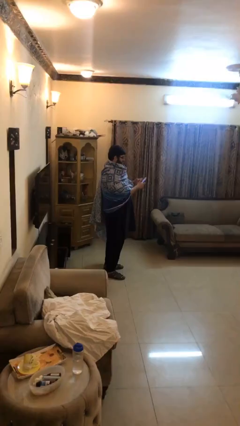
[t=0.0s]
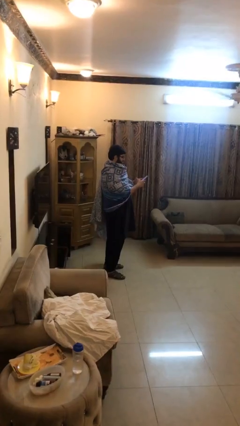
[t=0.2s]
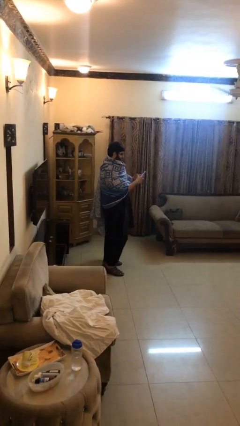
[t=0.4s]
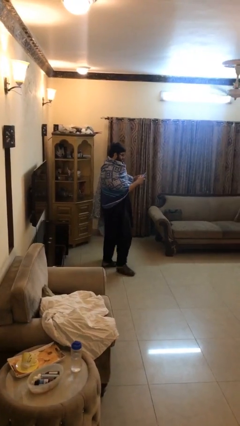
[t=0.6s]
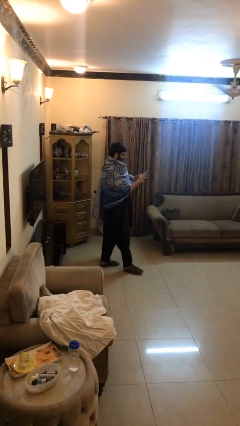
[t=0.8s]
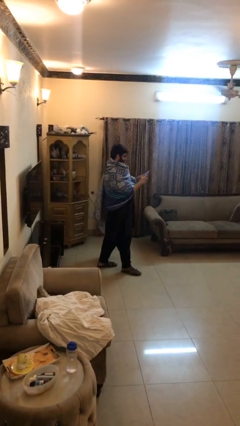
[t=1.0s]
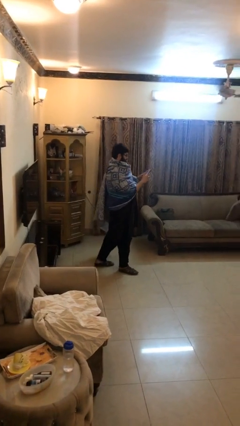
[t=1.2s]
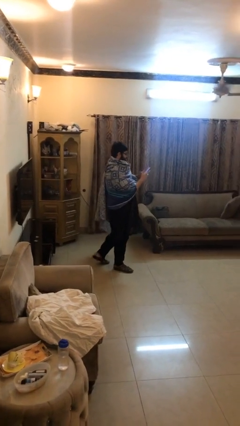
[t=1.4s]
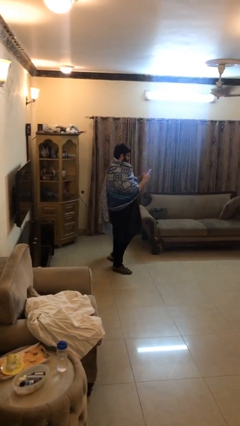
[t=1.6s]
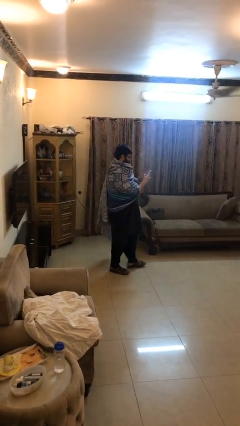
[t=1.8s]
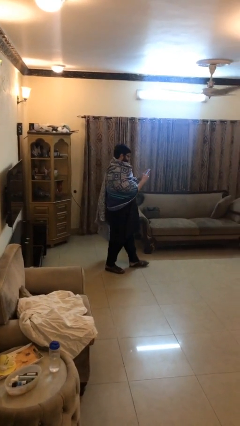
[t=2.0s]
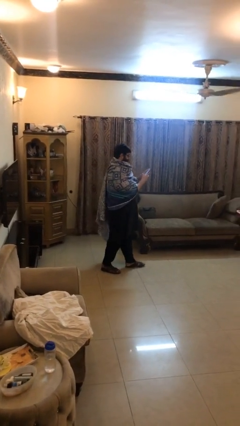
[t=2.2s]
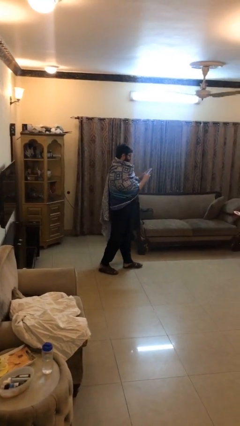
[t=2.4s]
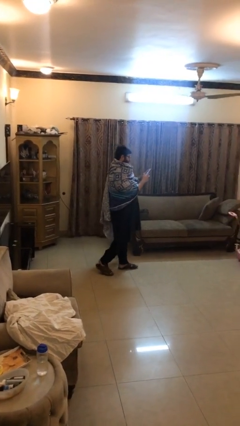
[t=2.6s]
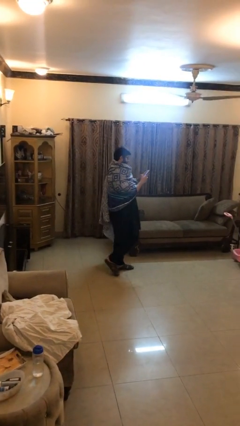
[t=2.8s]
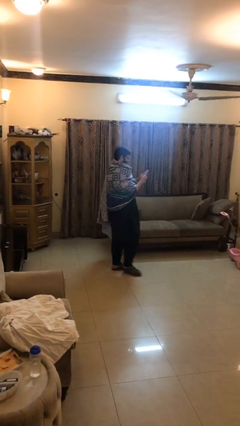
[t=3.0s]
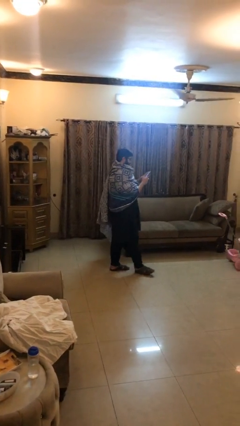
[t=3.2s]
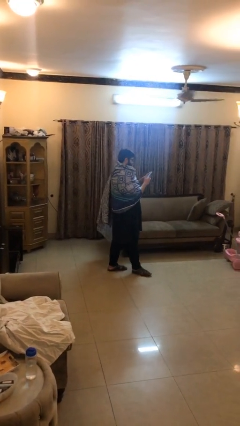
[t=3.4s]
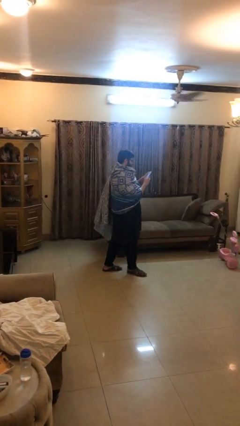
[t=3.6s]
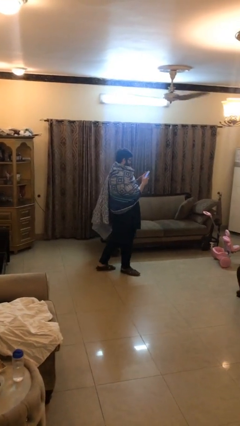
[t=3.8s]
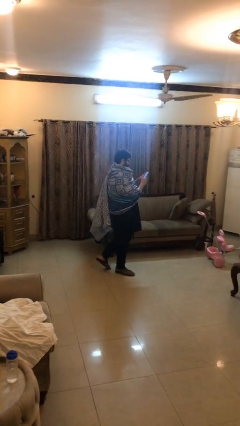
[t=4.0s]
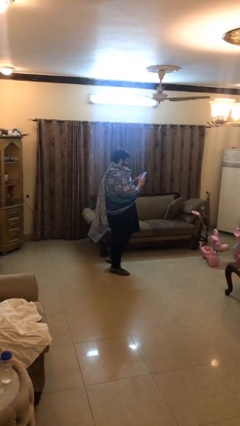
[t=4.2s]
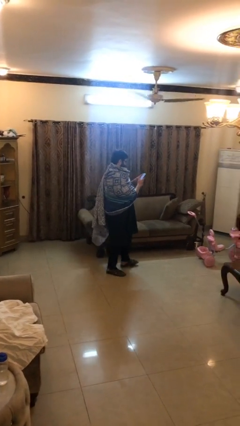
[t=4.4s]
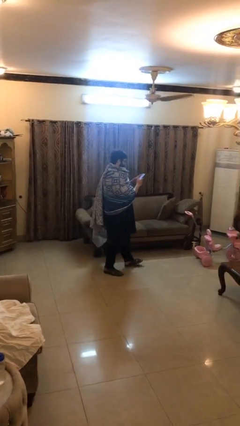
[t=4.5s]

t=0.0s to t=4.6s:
person texts on phone

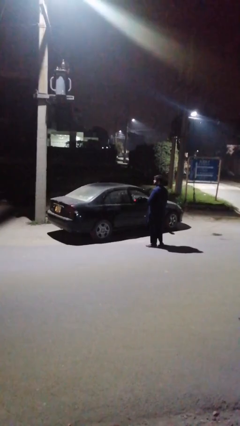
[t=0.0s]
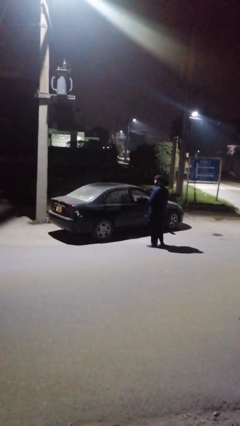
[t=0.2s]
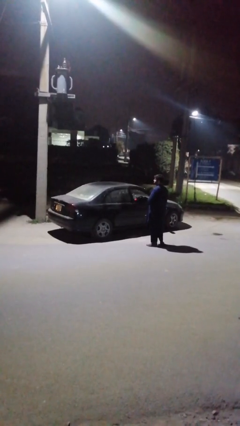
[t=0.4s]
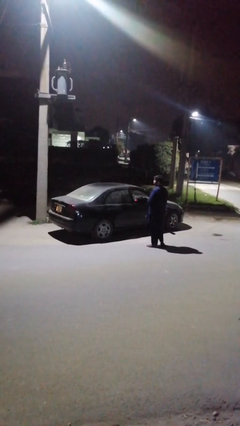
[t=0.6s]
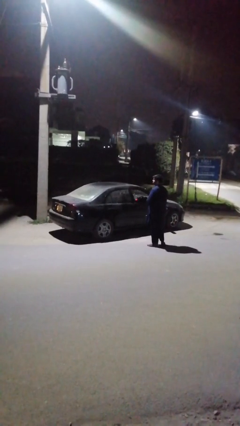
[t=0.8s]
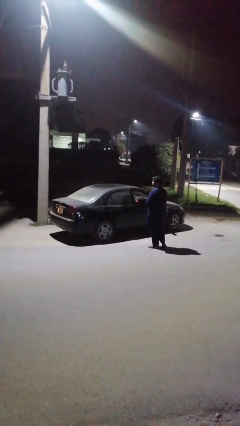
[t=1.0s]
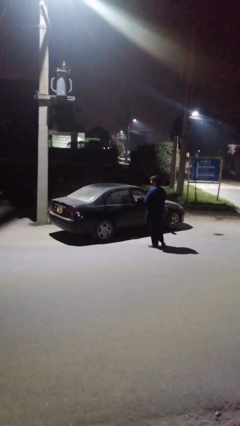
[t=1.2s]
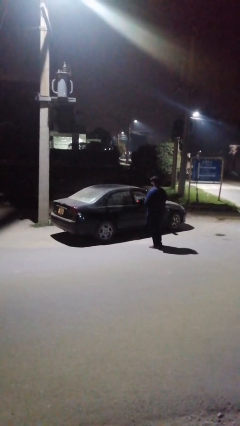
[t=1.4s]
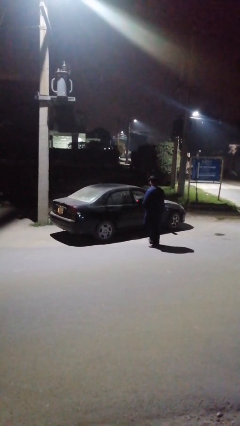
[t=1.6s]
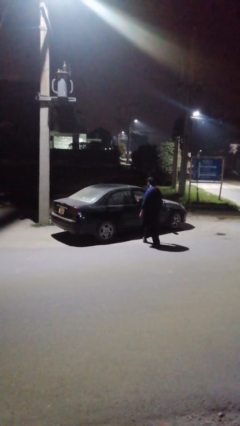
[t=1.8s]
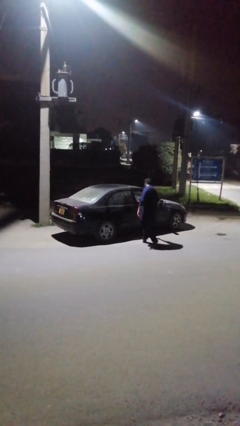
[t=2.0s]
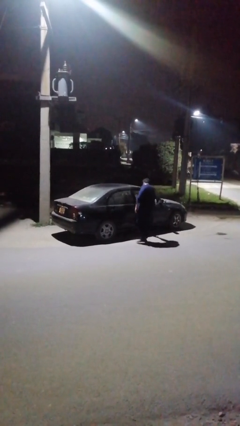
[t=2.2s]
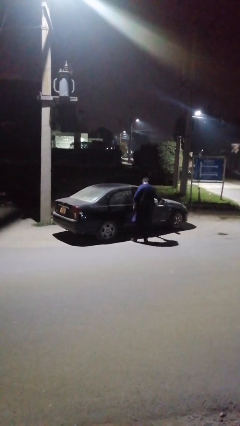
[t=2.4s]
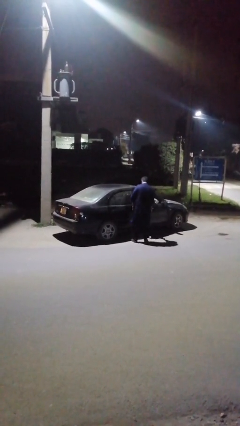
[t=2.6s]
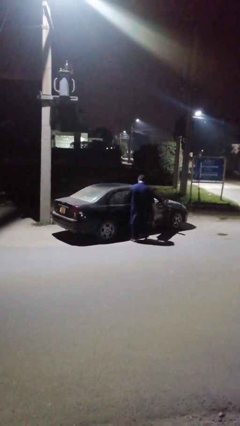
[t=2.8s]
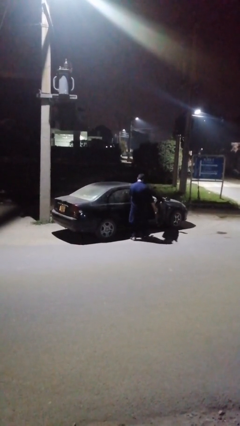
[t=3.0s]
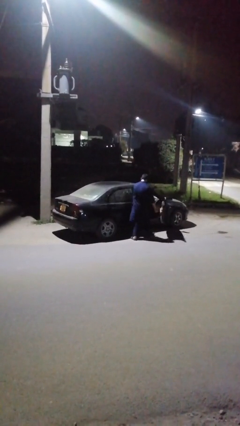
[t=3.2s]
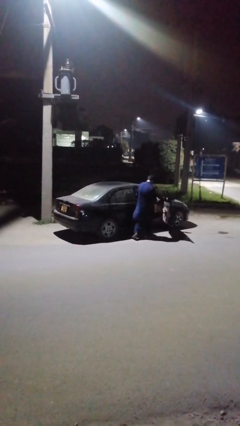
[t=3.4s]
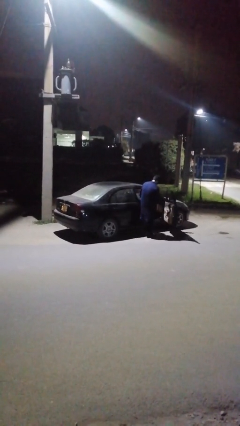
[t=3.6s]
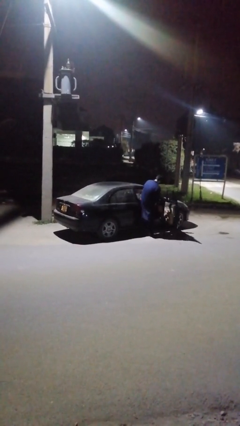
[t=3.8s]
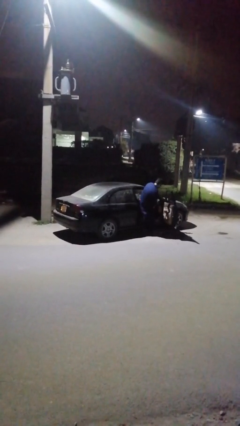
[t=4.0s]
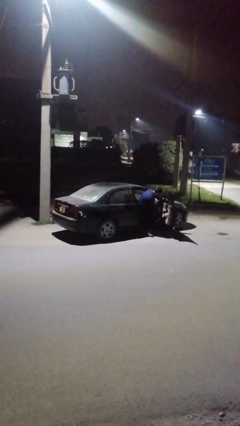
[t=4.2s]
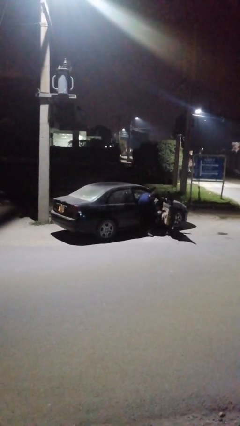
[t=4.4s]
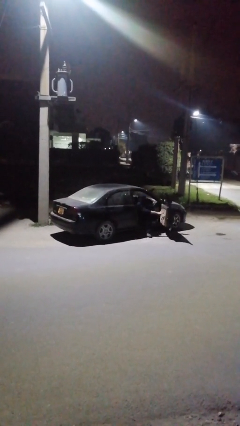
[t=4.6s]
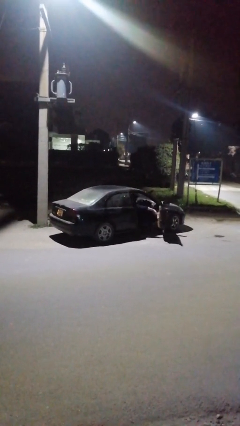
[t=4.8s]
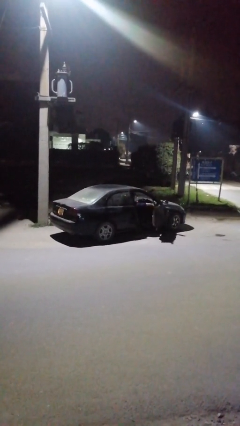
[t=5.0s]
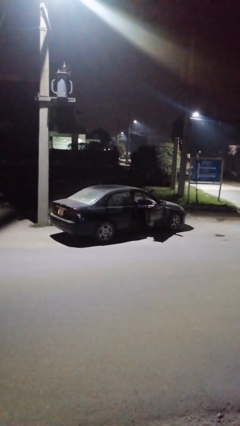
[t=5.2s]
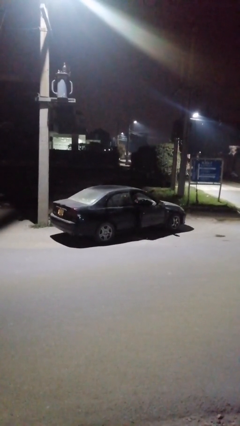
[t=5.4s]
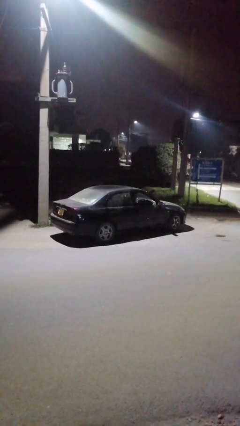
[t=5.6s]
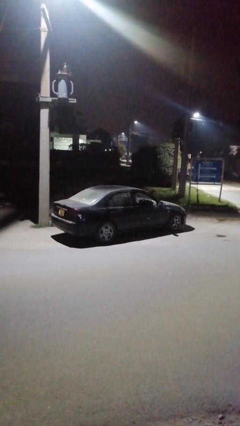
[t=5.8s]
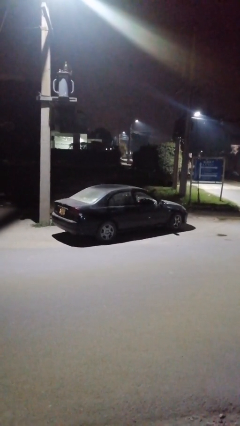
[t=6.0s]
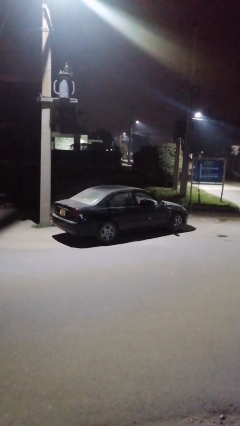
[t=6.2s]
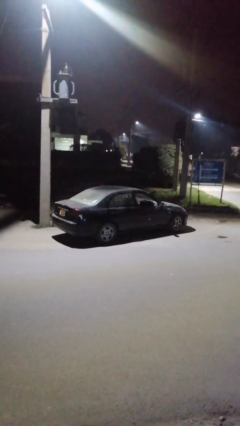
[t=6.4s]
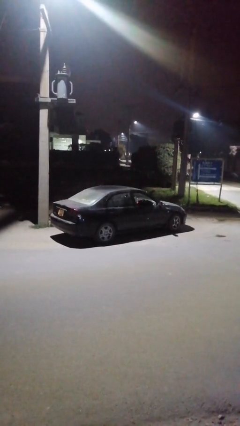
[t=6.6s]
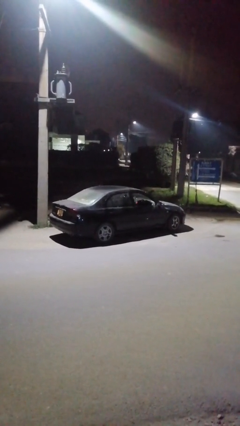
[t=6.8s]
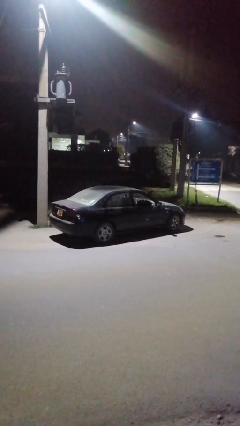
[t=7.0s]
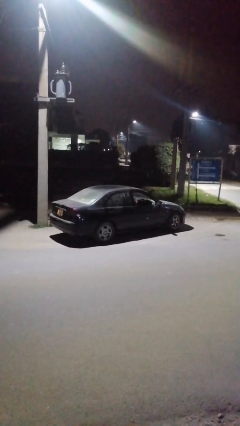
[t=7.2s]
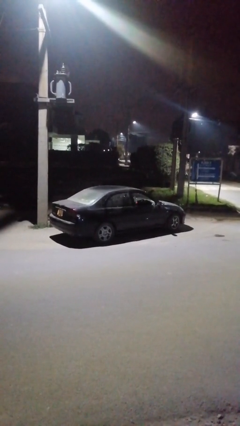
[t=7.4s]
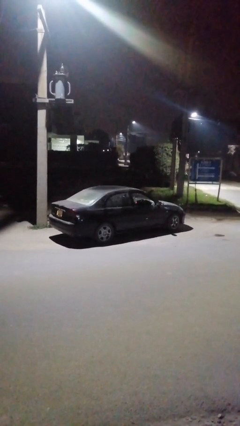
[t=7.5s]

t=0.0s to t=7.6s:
car picks up person

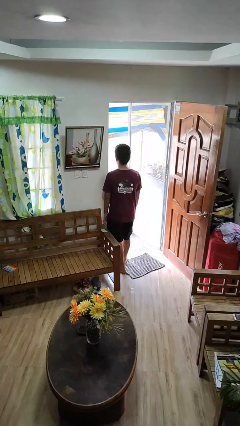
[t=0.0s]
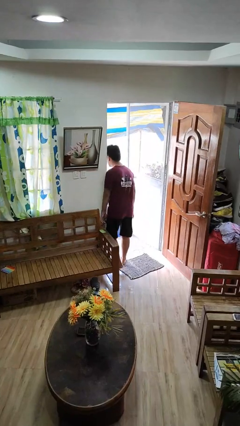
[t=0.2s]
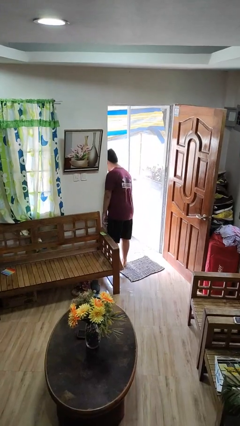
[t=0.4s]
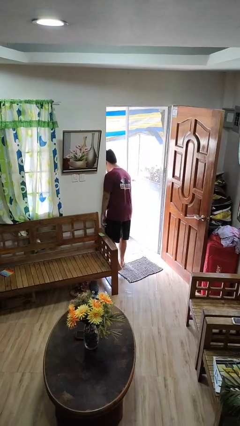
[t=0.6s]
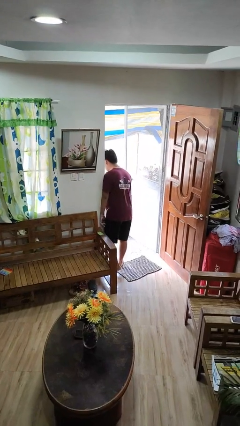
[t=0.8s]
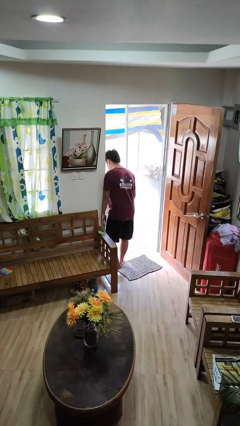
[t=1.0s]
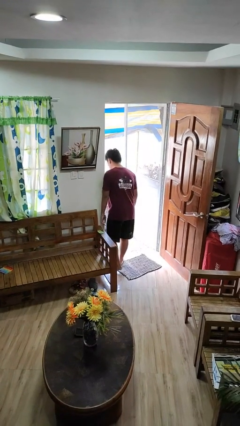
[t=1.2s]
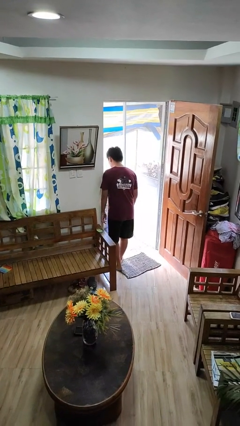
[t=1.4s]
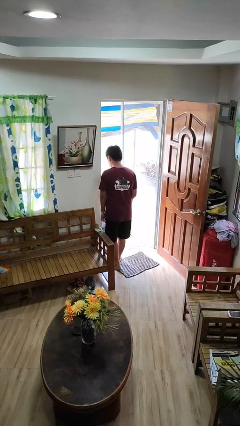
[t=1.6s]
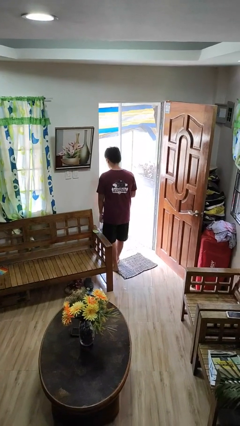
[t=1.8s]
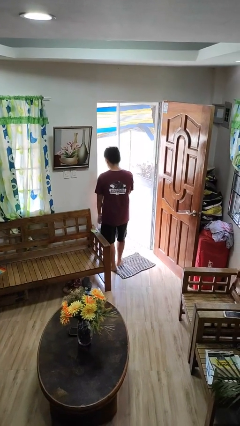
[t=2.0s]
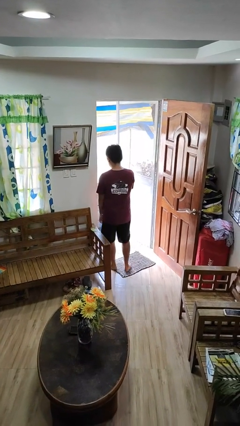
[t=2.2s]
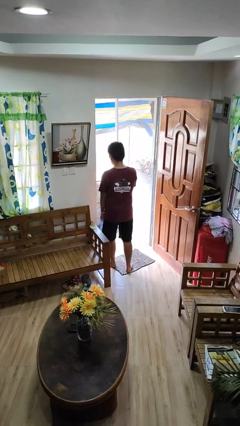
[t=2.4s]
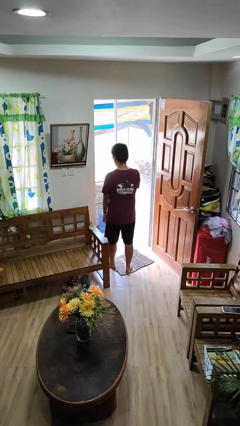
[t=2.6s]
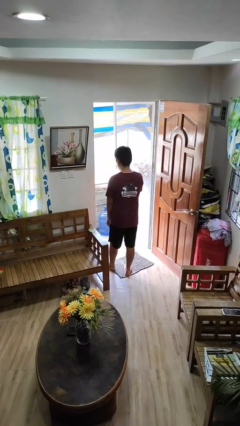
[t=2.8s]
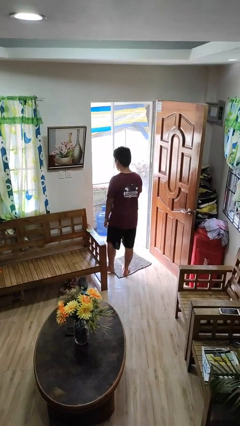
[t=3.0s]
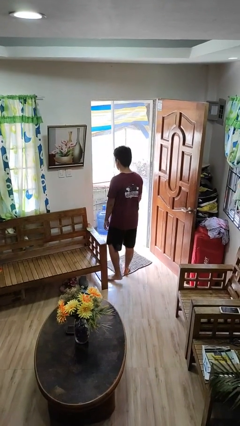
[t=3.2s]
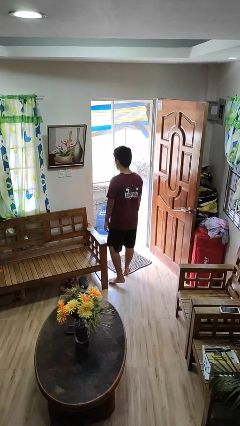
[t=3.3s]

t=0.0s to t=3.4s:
person bumps into wall

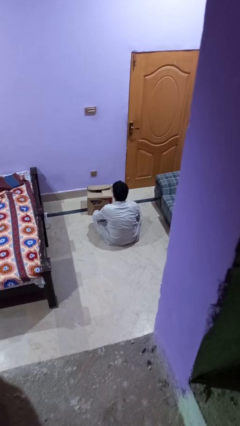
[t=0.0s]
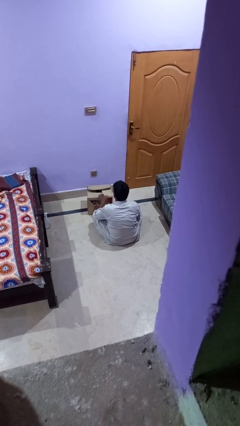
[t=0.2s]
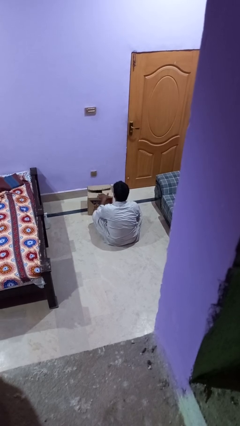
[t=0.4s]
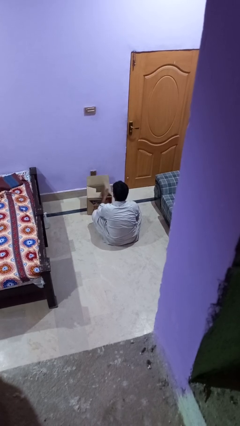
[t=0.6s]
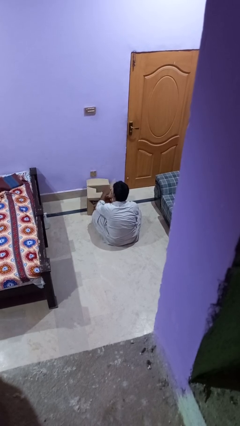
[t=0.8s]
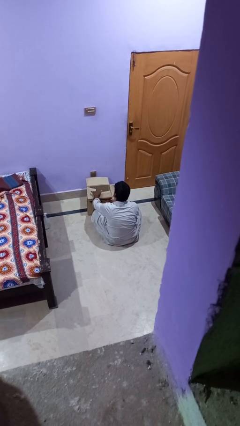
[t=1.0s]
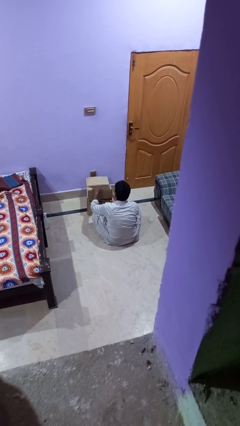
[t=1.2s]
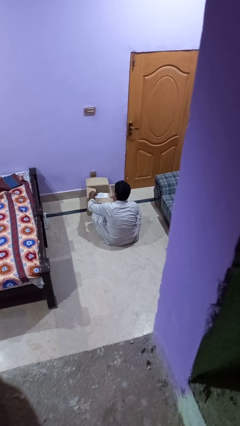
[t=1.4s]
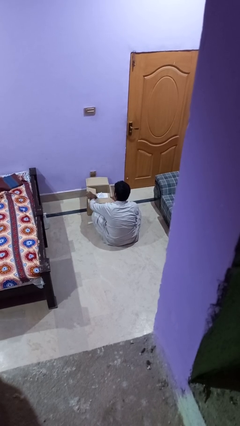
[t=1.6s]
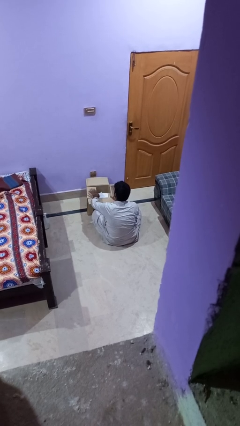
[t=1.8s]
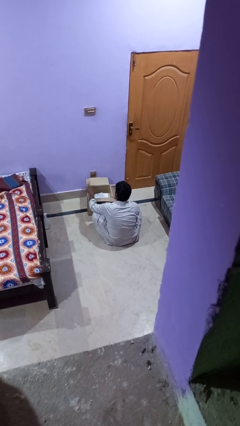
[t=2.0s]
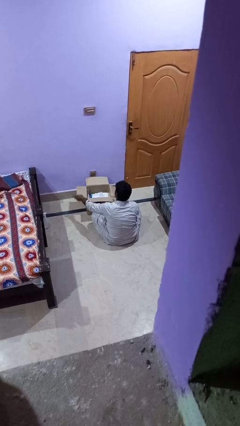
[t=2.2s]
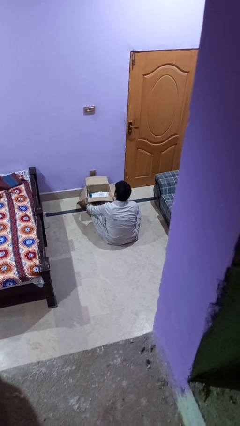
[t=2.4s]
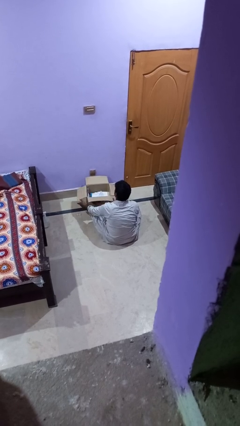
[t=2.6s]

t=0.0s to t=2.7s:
person opens box
